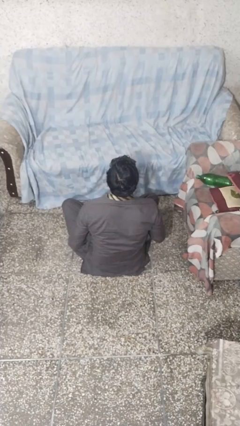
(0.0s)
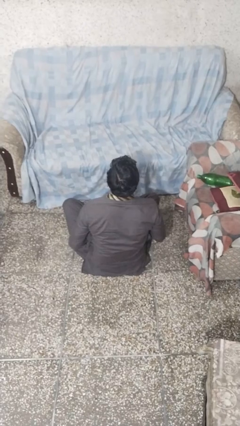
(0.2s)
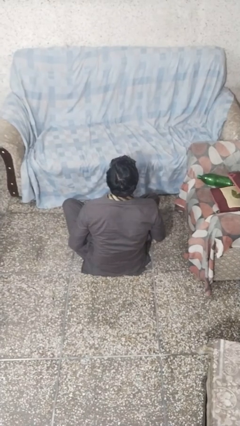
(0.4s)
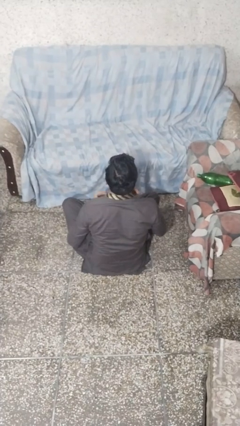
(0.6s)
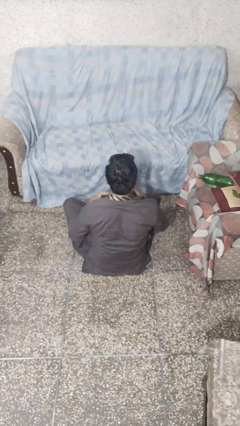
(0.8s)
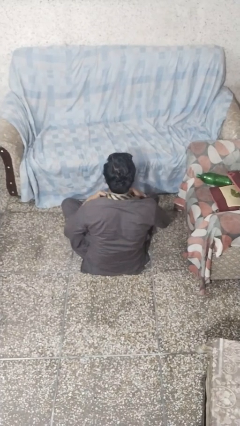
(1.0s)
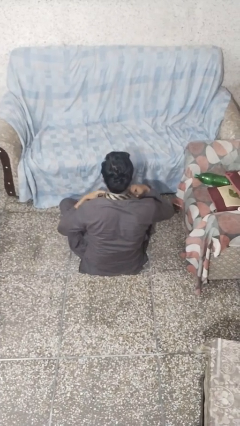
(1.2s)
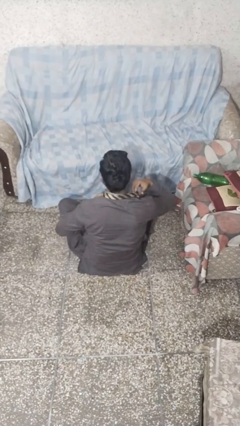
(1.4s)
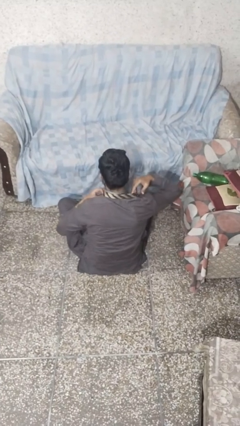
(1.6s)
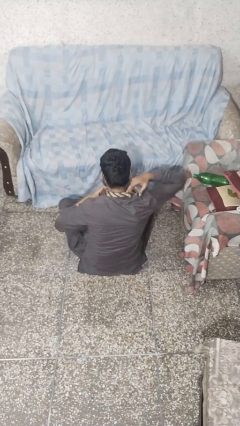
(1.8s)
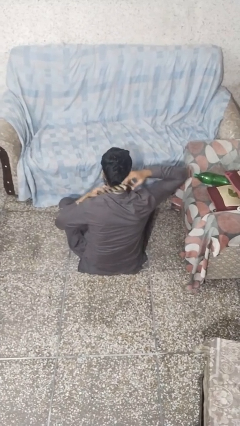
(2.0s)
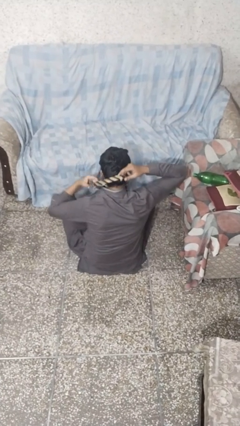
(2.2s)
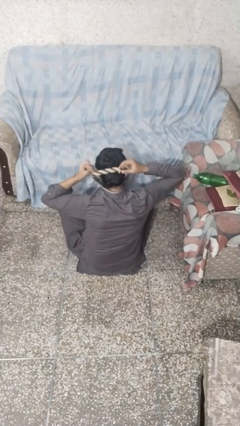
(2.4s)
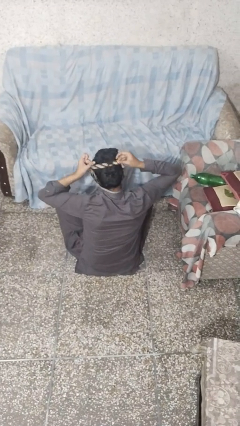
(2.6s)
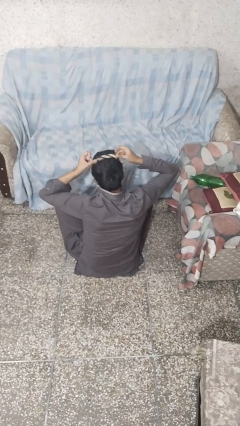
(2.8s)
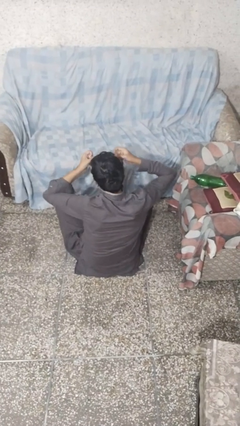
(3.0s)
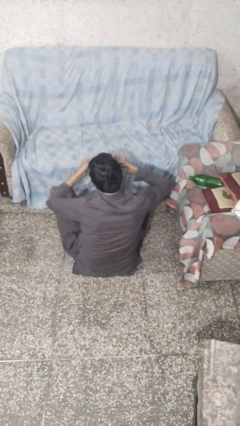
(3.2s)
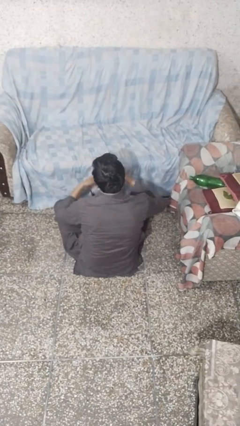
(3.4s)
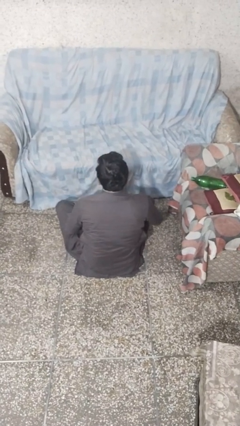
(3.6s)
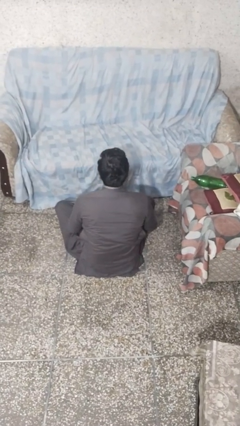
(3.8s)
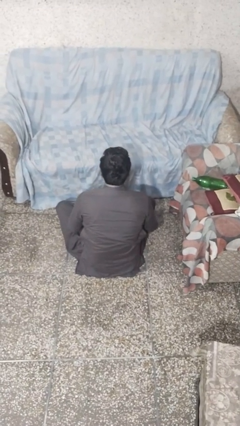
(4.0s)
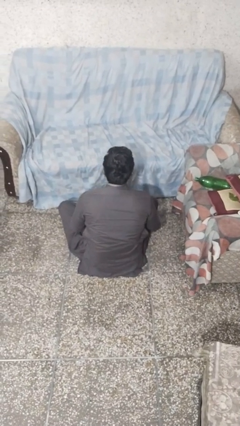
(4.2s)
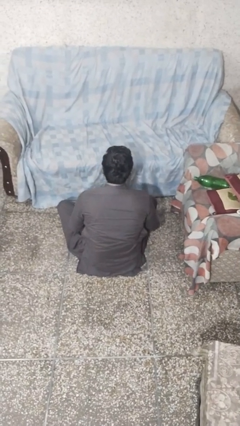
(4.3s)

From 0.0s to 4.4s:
person takes off necktie

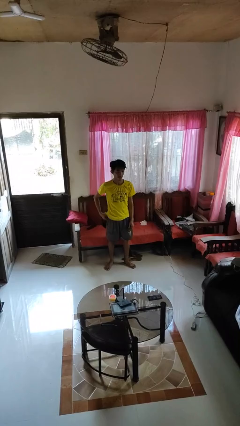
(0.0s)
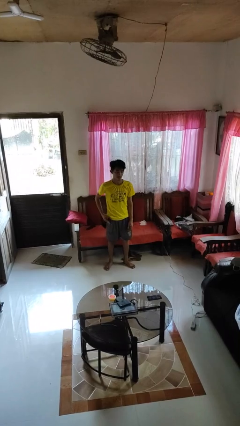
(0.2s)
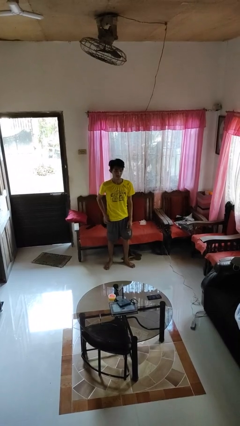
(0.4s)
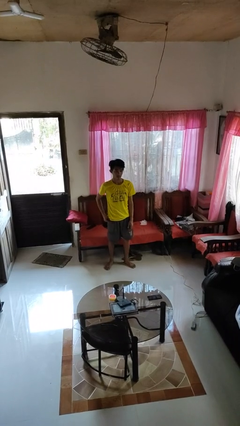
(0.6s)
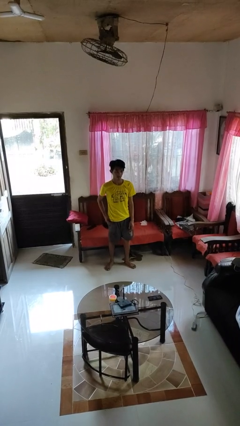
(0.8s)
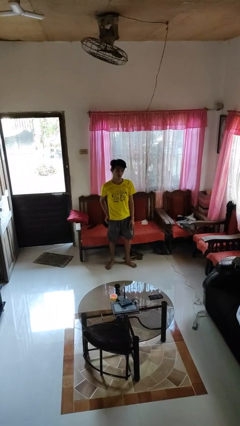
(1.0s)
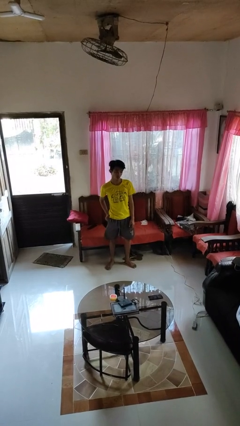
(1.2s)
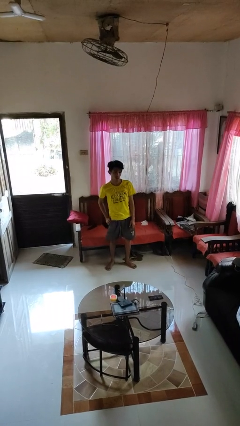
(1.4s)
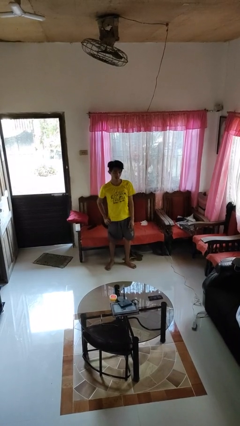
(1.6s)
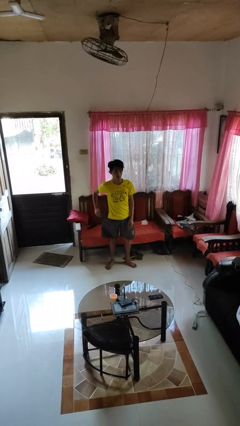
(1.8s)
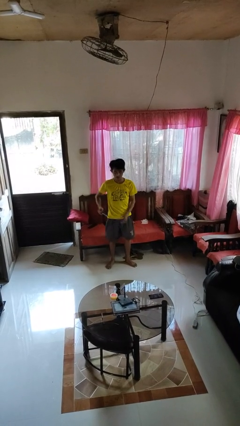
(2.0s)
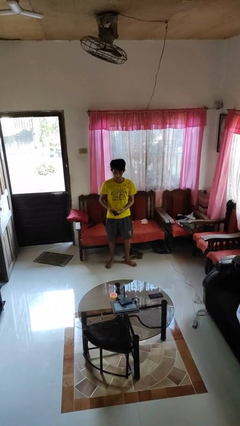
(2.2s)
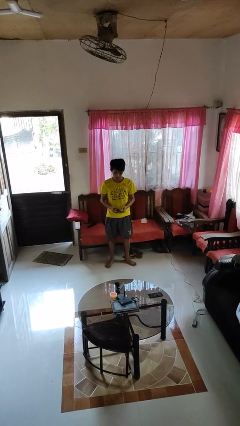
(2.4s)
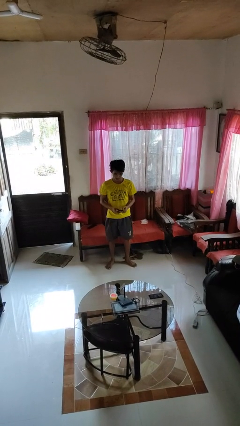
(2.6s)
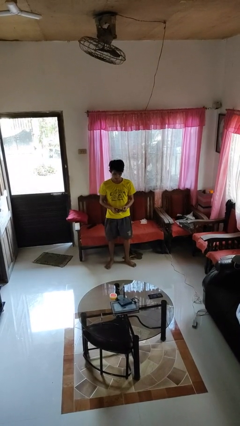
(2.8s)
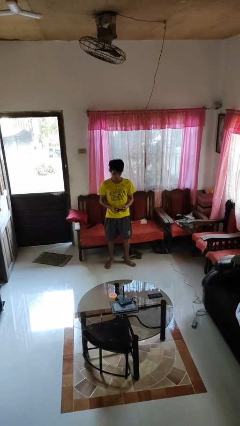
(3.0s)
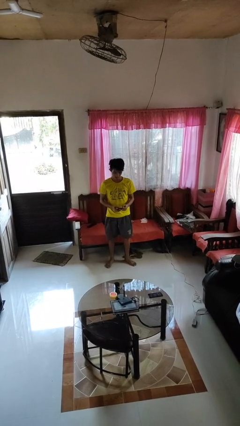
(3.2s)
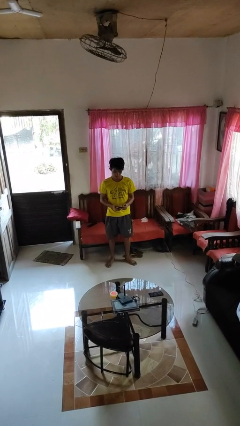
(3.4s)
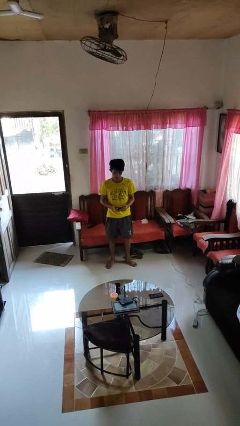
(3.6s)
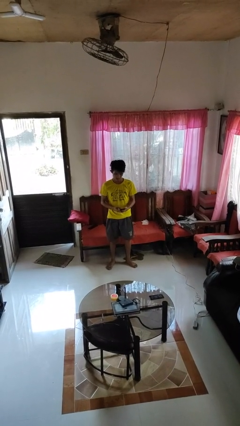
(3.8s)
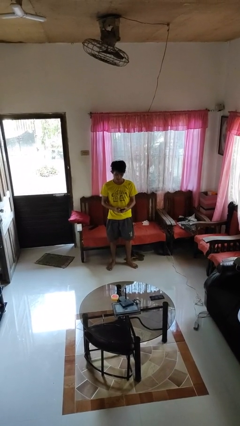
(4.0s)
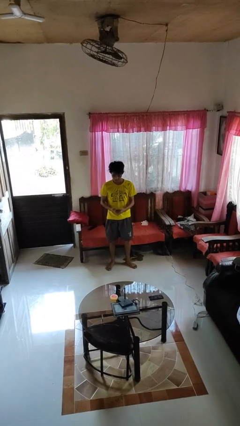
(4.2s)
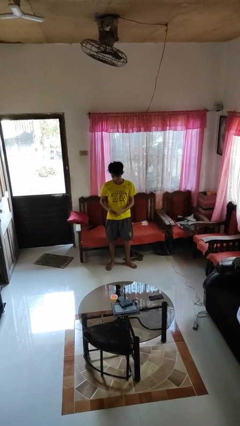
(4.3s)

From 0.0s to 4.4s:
person takes phone from pocket

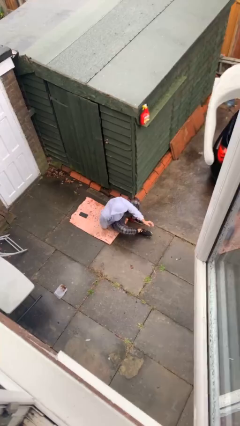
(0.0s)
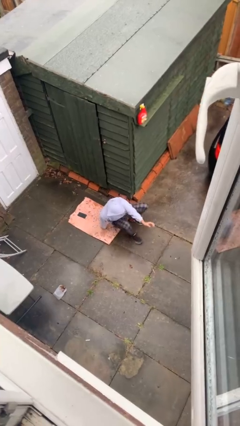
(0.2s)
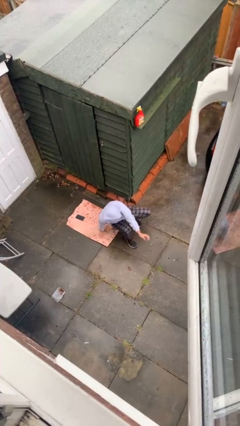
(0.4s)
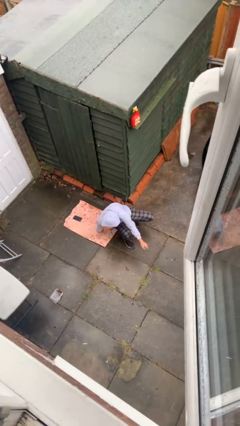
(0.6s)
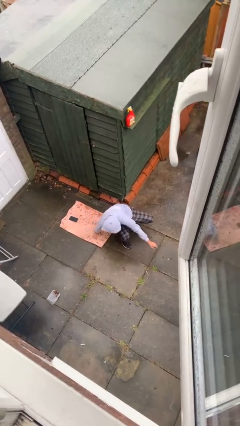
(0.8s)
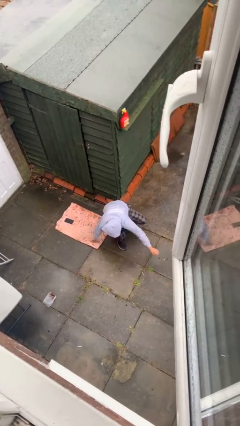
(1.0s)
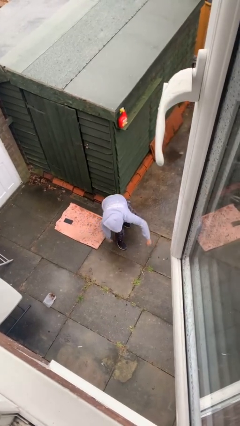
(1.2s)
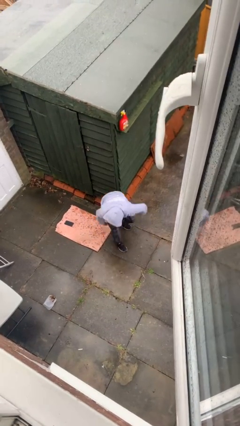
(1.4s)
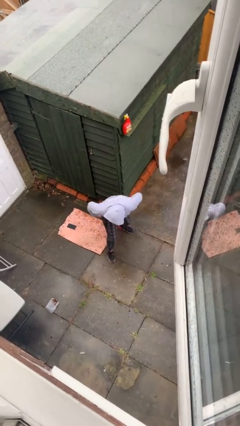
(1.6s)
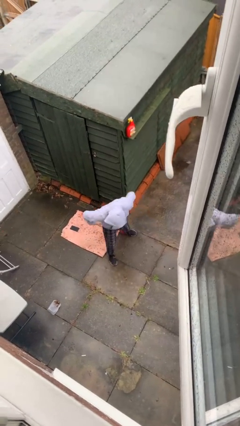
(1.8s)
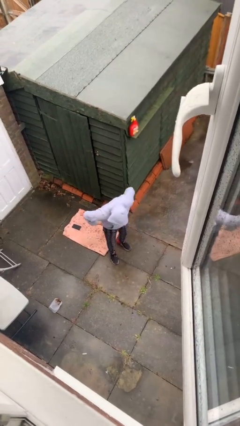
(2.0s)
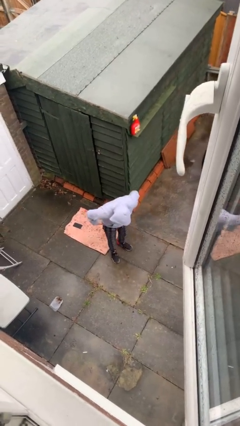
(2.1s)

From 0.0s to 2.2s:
person stands up

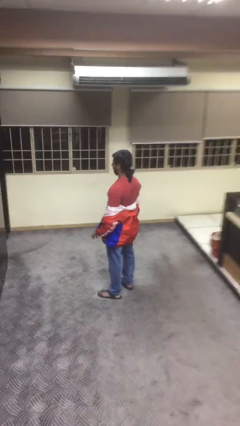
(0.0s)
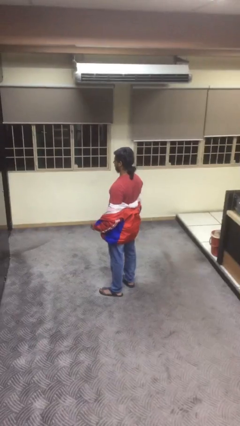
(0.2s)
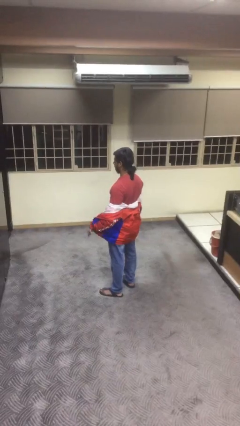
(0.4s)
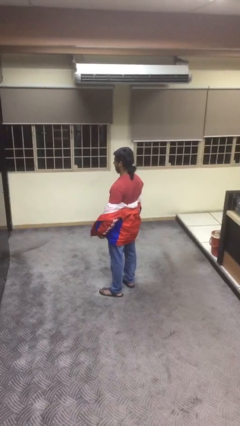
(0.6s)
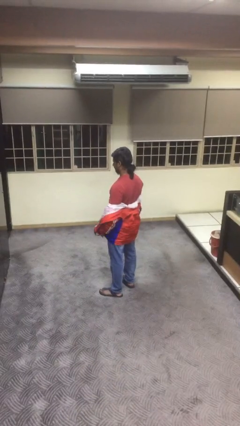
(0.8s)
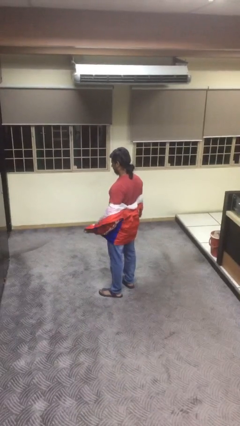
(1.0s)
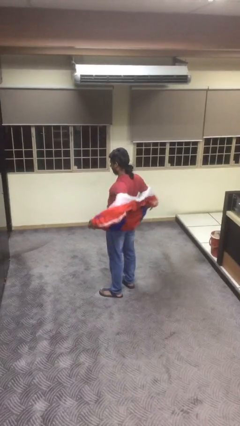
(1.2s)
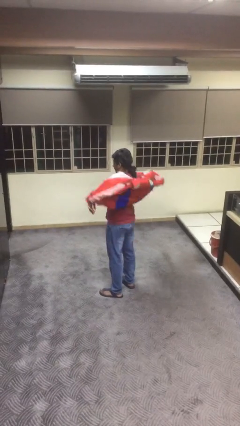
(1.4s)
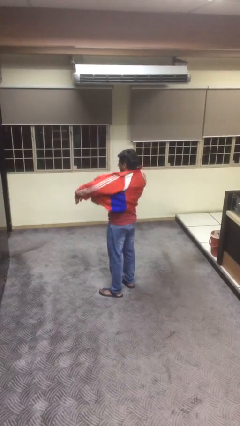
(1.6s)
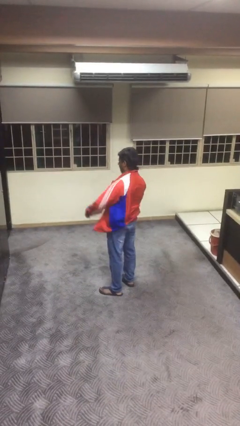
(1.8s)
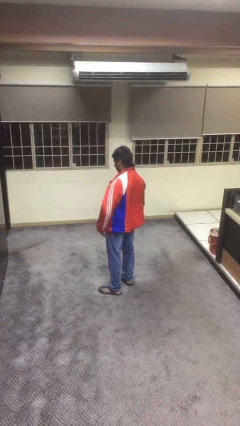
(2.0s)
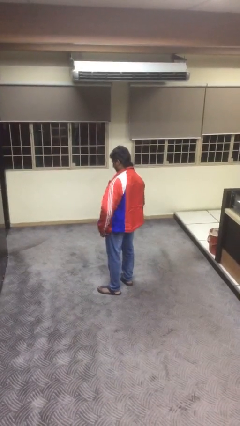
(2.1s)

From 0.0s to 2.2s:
person puts on jacket

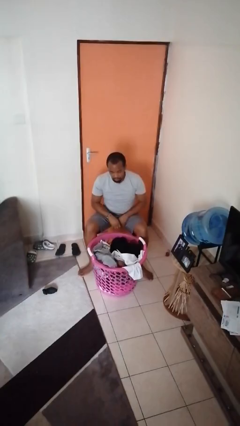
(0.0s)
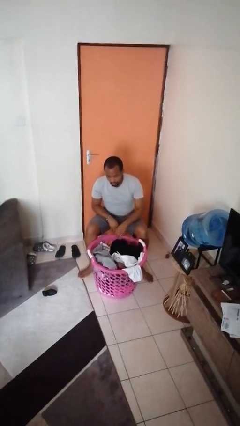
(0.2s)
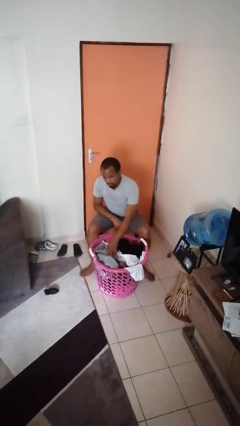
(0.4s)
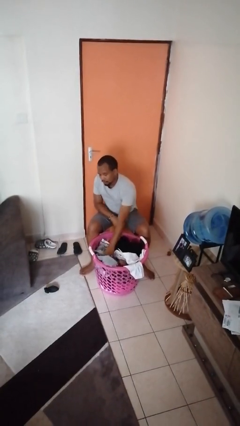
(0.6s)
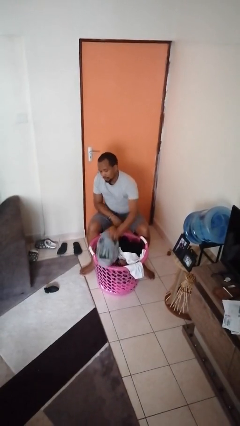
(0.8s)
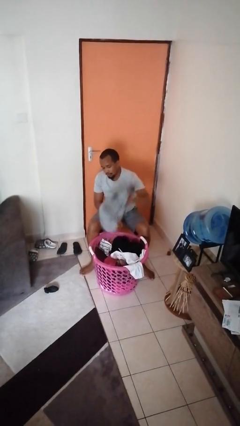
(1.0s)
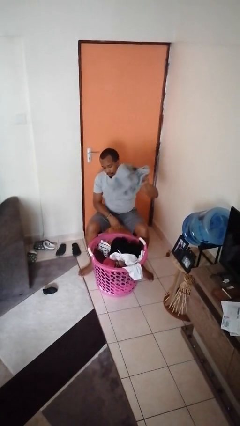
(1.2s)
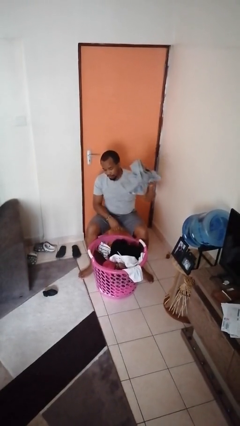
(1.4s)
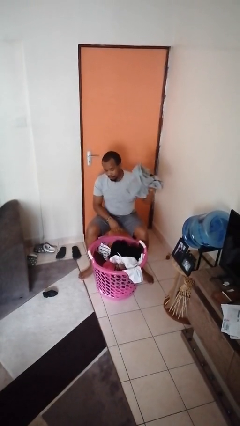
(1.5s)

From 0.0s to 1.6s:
person takes object from basket

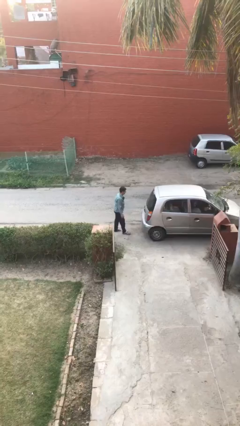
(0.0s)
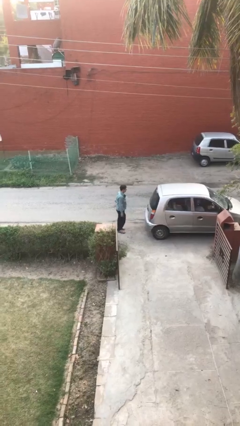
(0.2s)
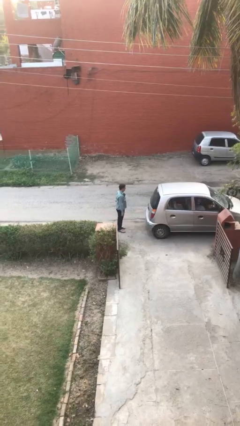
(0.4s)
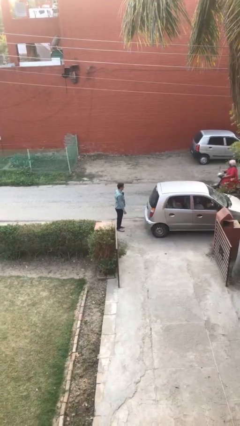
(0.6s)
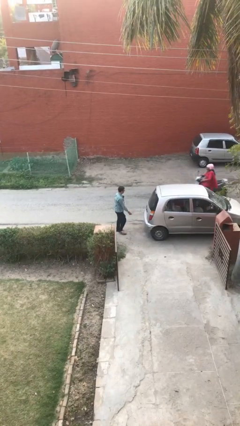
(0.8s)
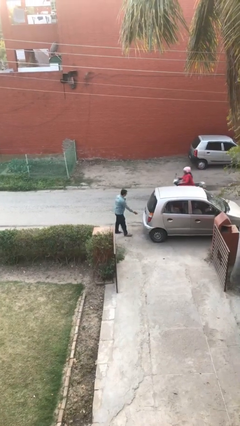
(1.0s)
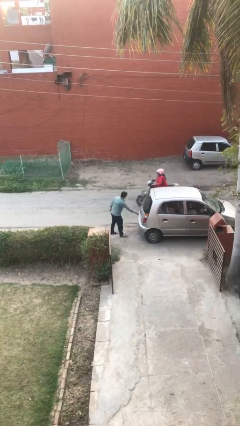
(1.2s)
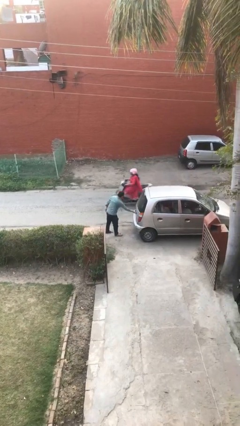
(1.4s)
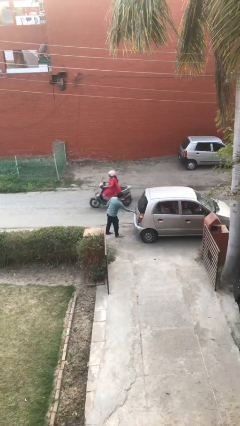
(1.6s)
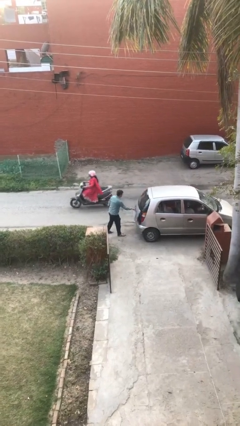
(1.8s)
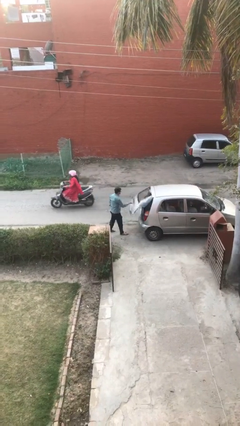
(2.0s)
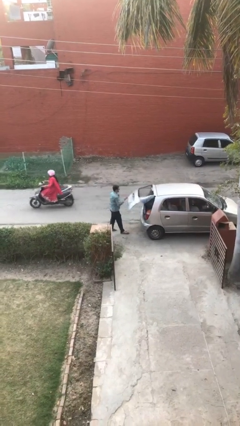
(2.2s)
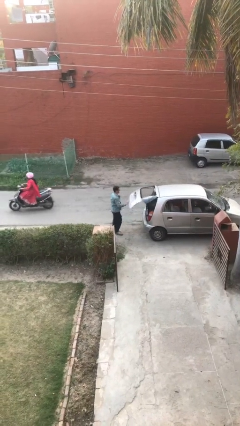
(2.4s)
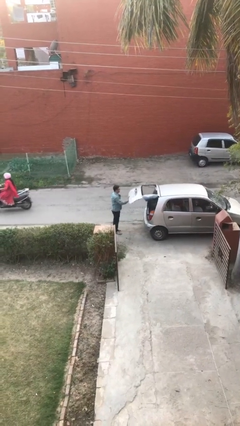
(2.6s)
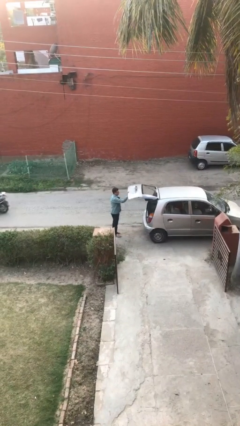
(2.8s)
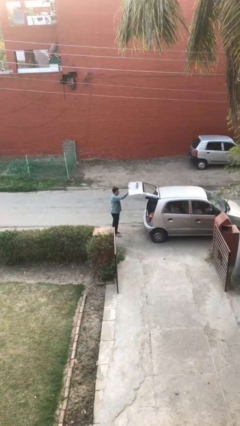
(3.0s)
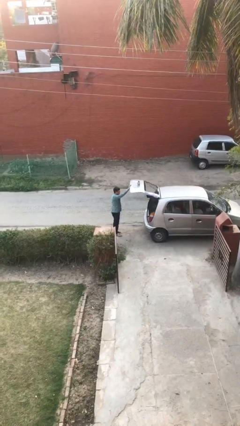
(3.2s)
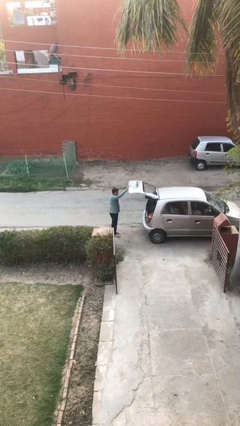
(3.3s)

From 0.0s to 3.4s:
person opens car trunk
